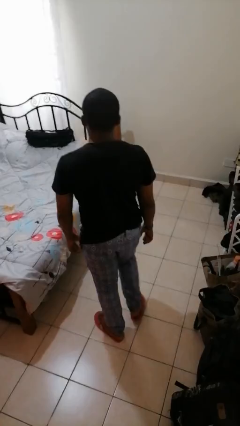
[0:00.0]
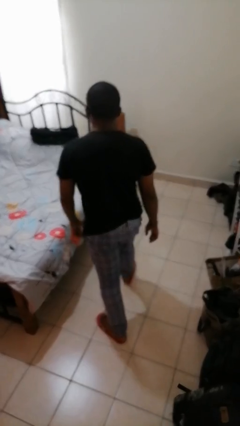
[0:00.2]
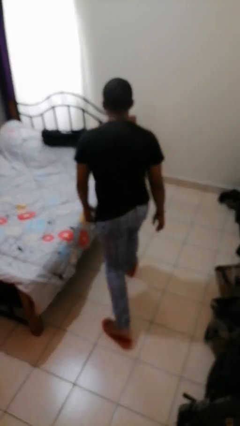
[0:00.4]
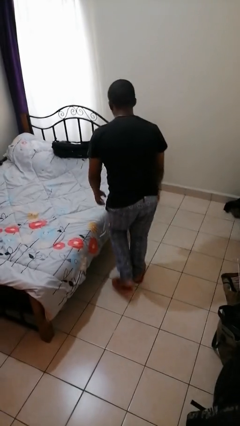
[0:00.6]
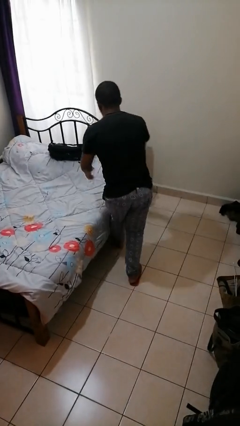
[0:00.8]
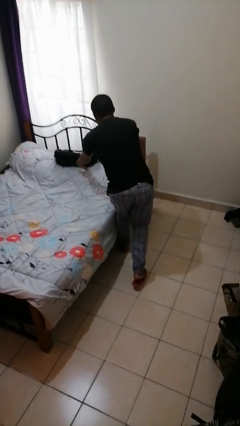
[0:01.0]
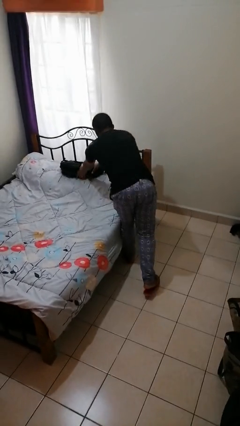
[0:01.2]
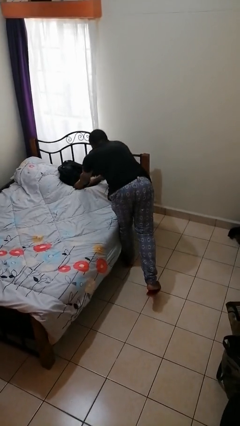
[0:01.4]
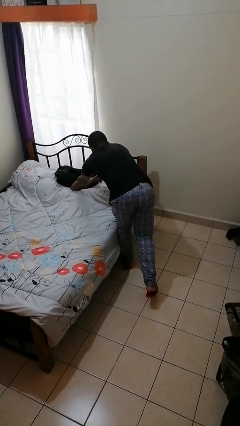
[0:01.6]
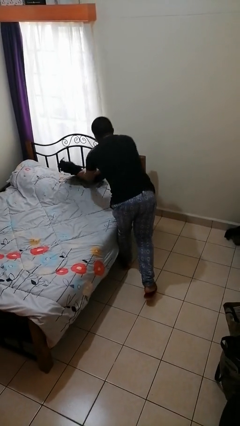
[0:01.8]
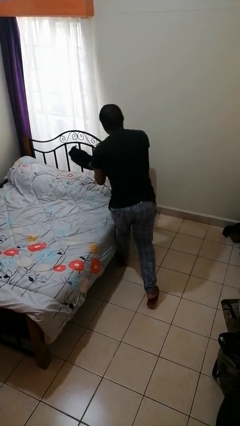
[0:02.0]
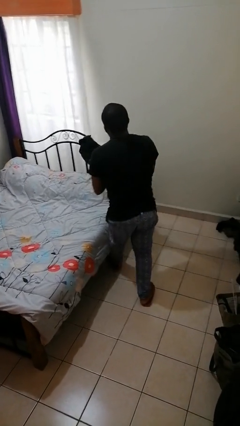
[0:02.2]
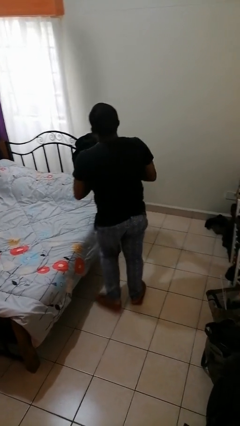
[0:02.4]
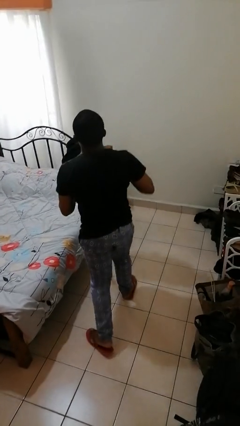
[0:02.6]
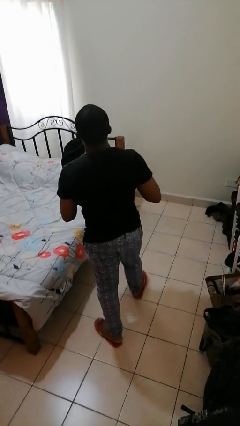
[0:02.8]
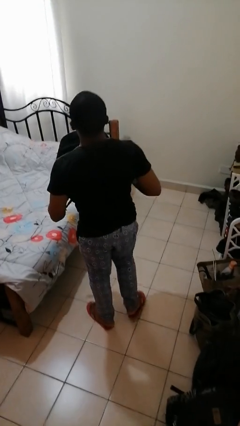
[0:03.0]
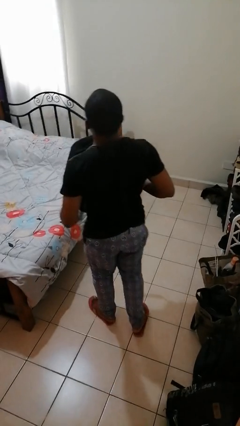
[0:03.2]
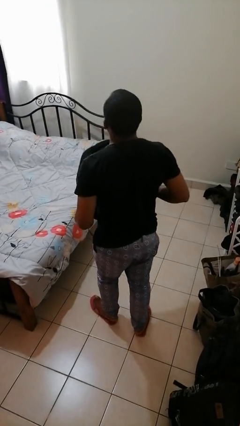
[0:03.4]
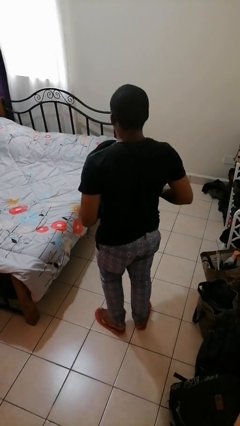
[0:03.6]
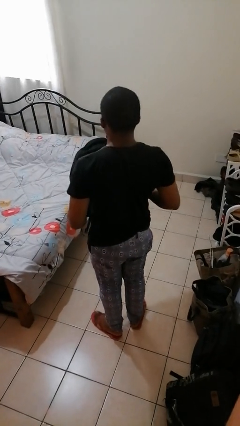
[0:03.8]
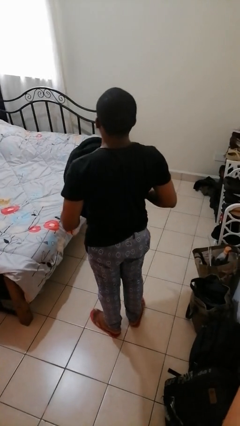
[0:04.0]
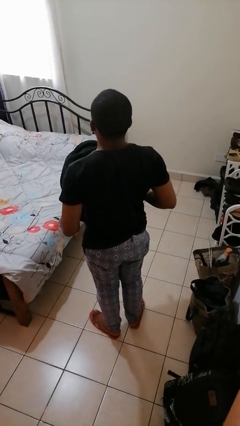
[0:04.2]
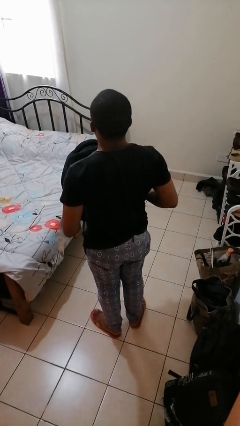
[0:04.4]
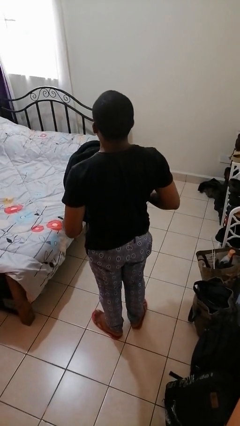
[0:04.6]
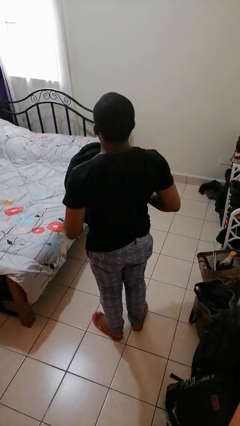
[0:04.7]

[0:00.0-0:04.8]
person picks up object from bed

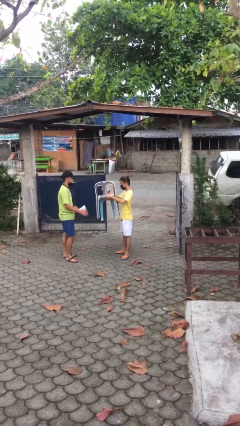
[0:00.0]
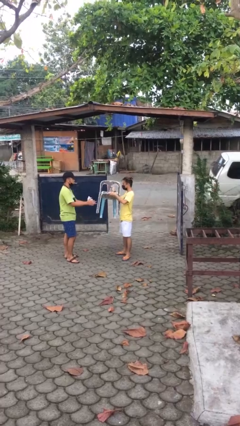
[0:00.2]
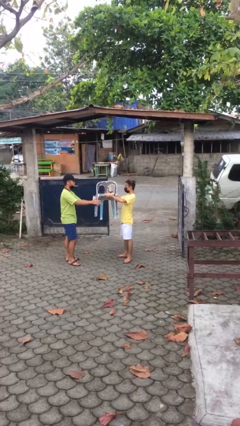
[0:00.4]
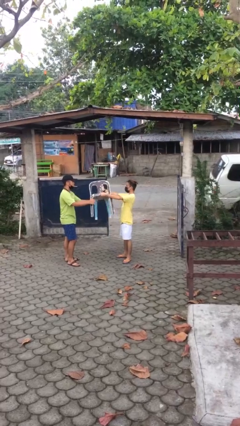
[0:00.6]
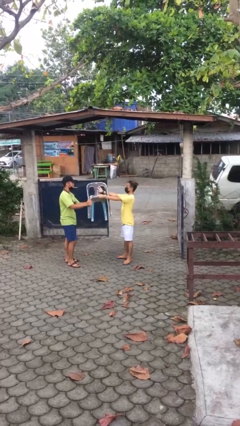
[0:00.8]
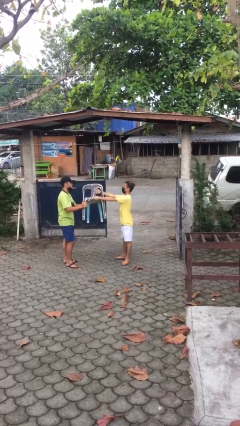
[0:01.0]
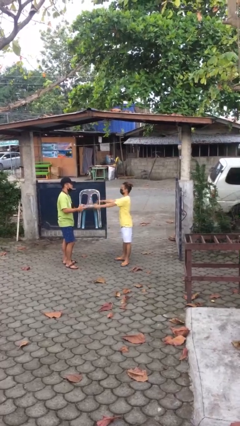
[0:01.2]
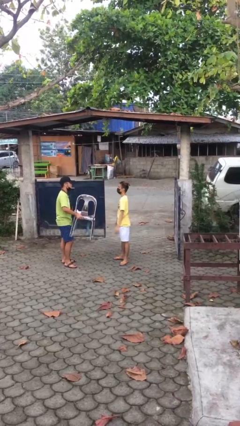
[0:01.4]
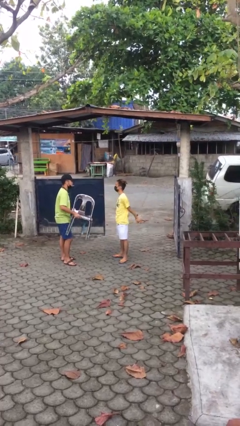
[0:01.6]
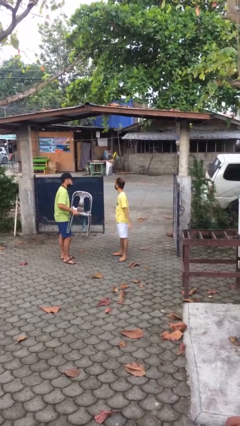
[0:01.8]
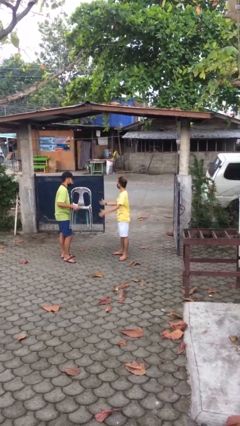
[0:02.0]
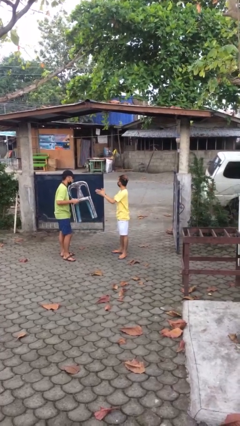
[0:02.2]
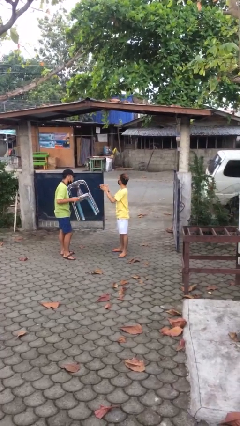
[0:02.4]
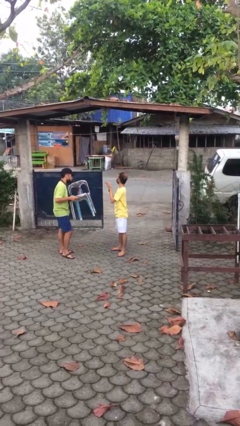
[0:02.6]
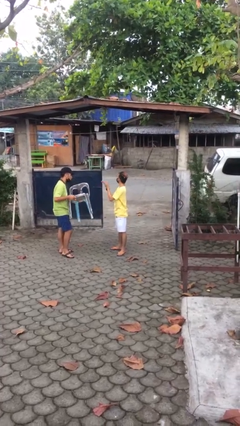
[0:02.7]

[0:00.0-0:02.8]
person transfers object to person

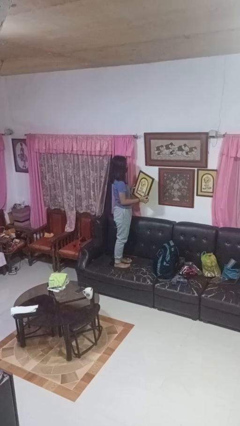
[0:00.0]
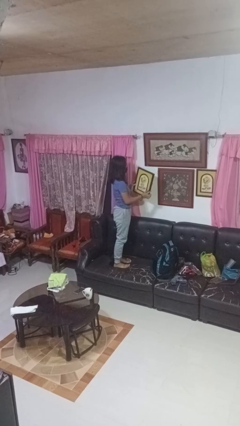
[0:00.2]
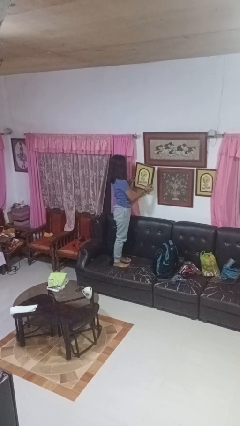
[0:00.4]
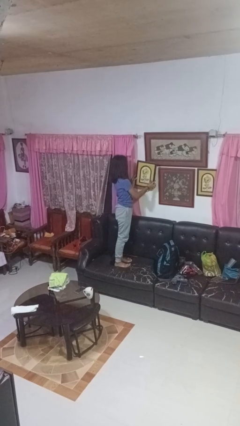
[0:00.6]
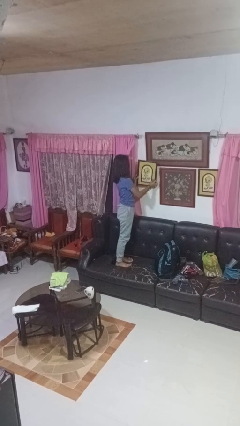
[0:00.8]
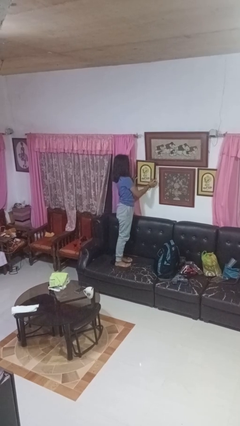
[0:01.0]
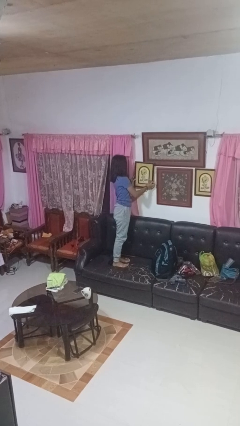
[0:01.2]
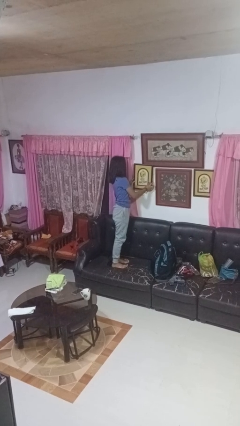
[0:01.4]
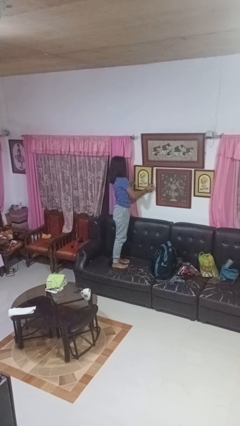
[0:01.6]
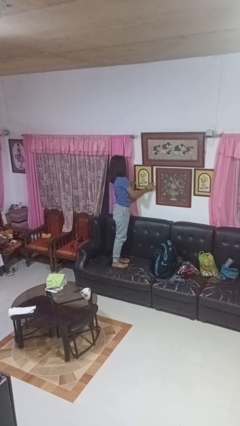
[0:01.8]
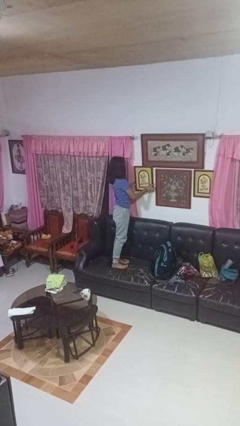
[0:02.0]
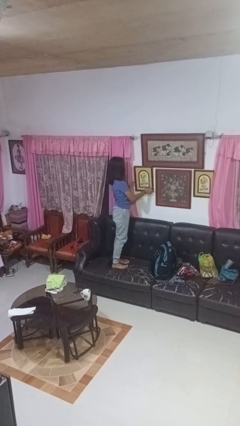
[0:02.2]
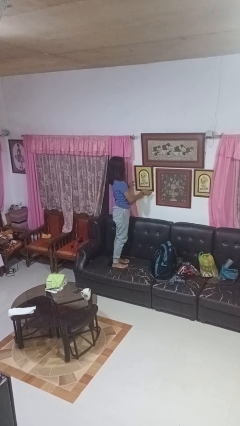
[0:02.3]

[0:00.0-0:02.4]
person puts up picture frame

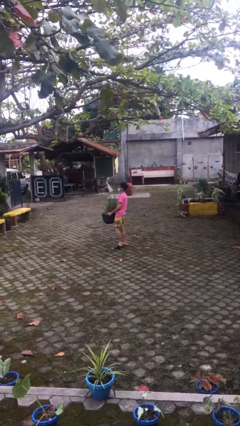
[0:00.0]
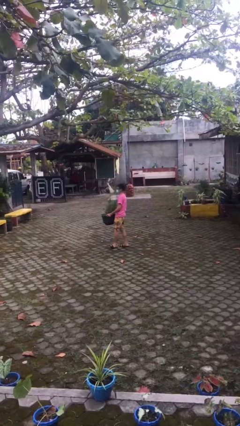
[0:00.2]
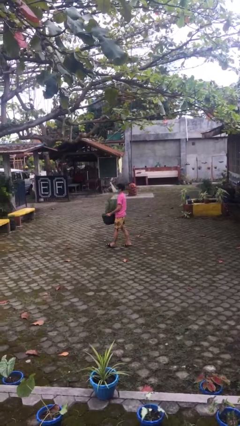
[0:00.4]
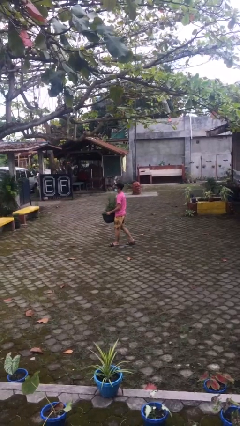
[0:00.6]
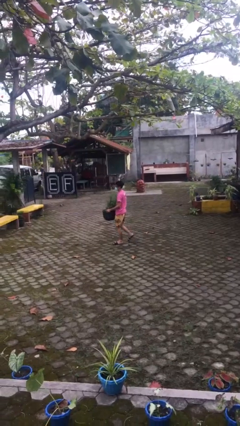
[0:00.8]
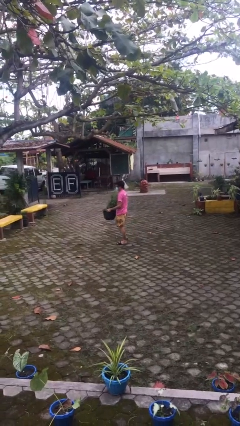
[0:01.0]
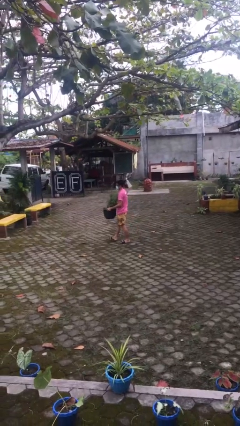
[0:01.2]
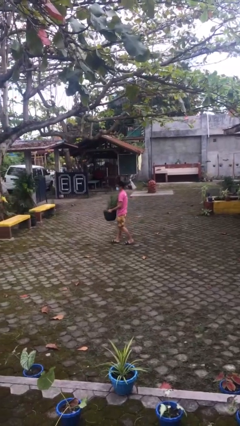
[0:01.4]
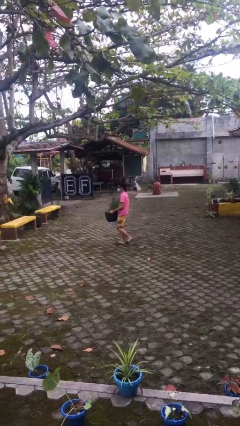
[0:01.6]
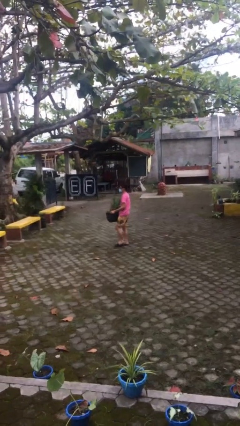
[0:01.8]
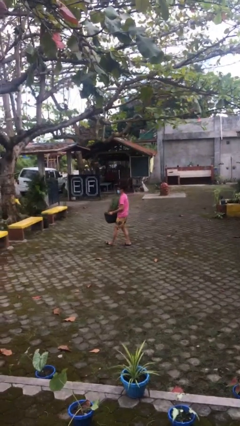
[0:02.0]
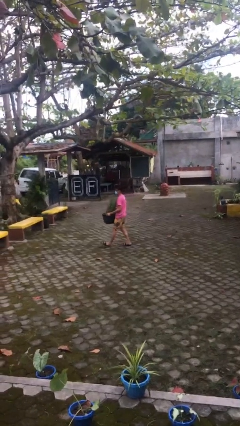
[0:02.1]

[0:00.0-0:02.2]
person carries heavy object

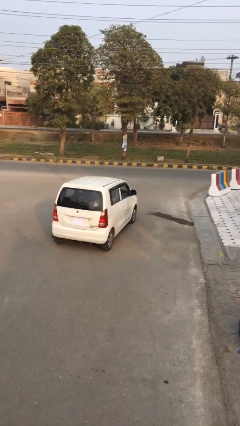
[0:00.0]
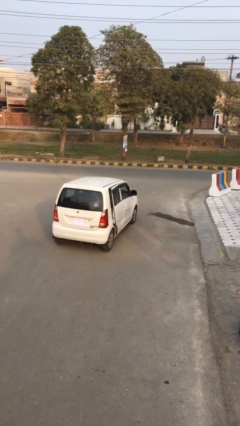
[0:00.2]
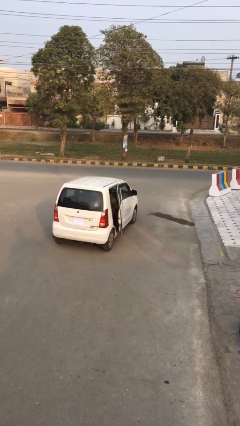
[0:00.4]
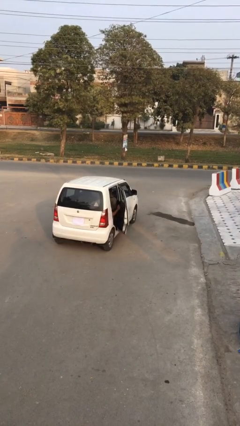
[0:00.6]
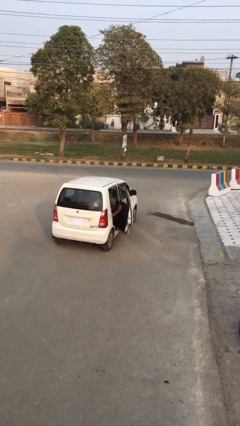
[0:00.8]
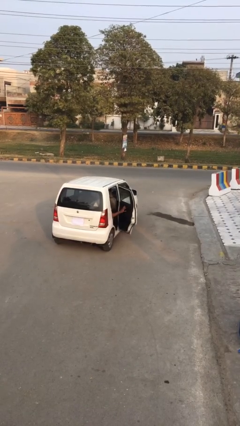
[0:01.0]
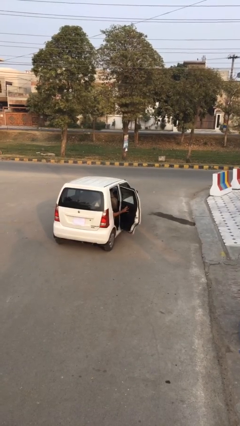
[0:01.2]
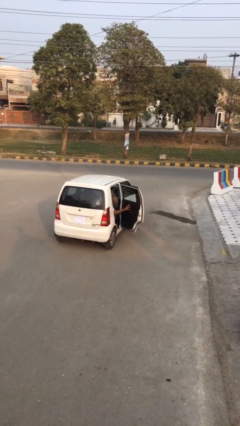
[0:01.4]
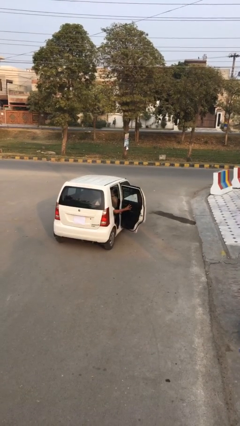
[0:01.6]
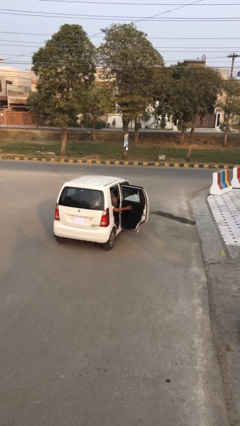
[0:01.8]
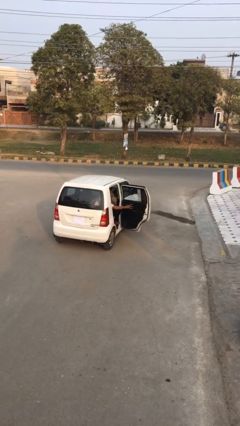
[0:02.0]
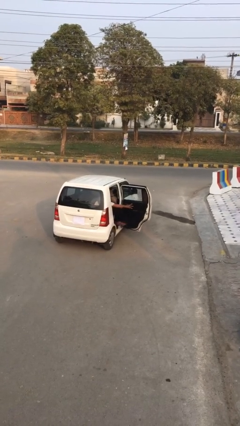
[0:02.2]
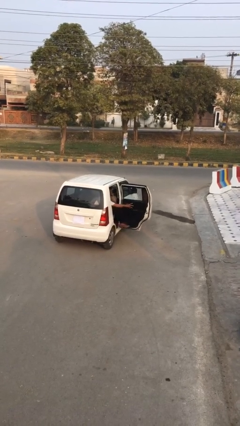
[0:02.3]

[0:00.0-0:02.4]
person opens car door

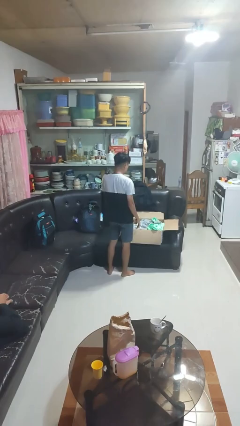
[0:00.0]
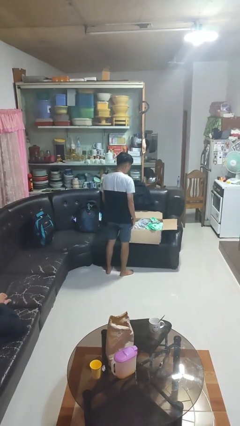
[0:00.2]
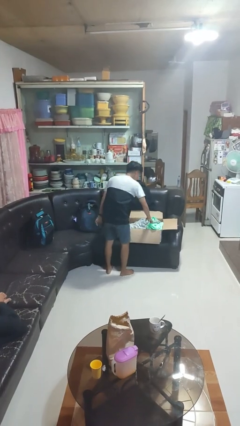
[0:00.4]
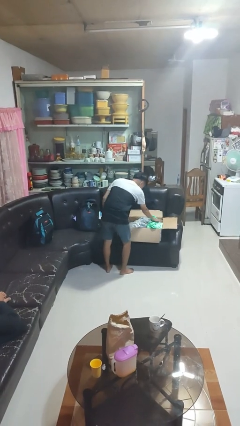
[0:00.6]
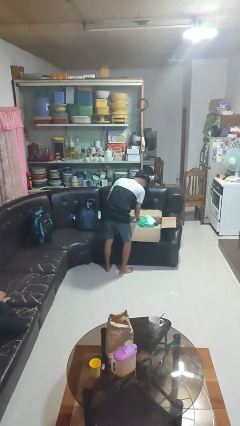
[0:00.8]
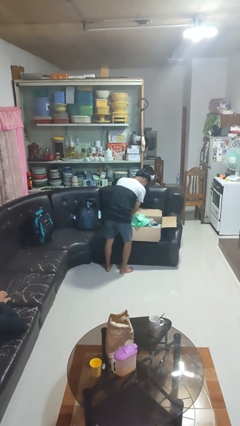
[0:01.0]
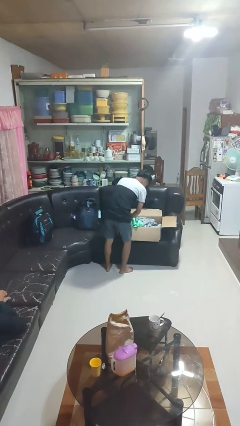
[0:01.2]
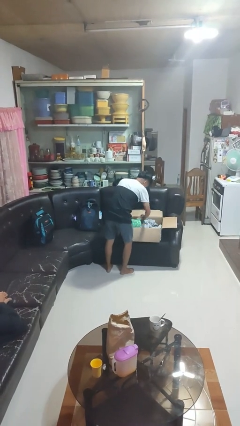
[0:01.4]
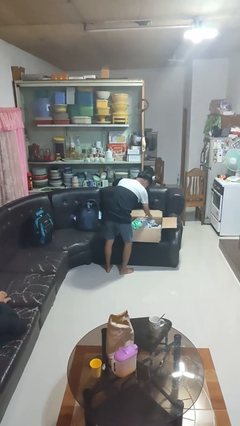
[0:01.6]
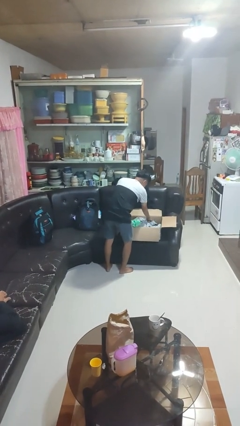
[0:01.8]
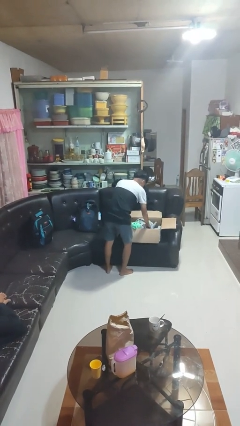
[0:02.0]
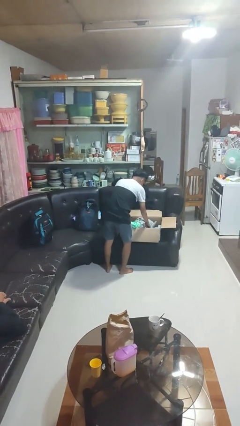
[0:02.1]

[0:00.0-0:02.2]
person searches in box

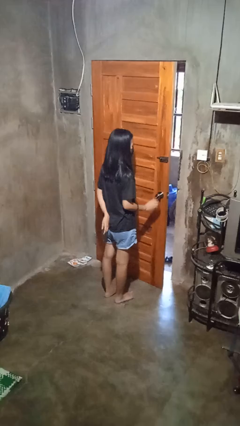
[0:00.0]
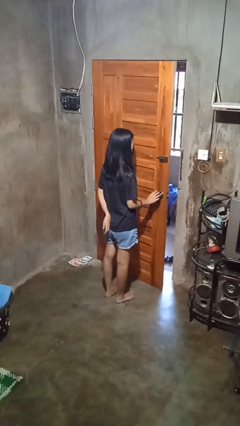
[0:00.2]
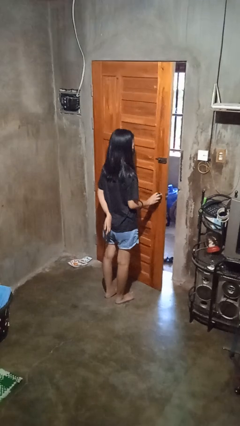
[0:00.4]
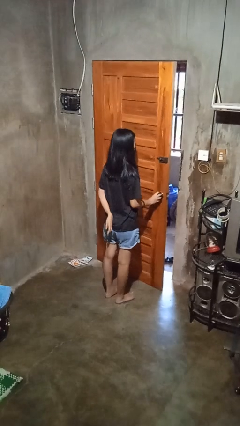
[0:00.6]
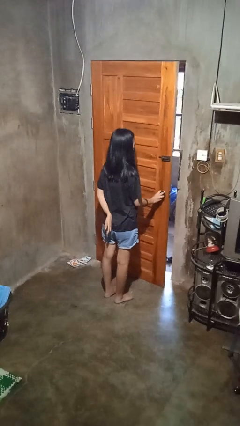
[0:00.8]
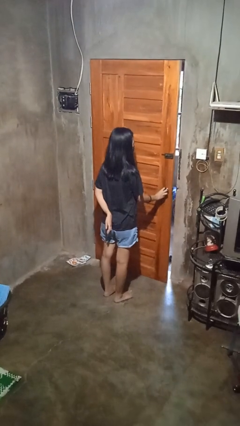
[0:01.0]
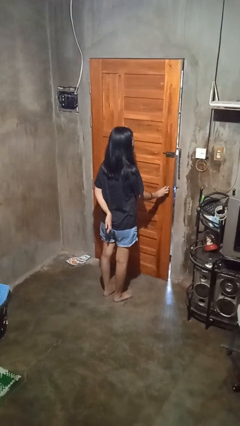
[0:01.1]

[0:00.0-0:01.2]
person closes facility door
